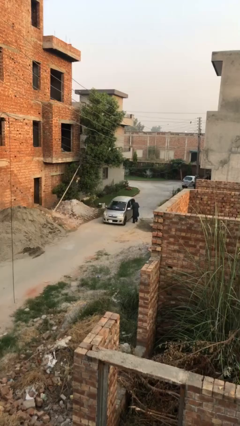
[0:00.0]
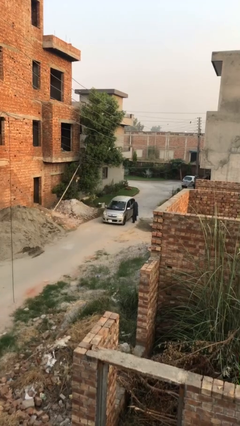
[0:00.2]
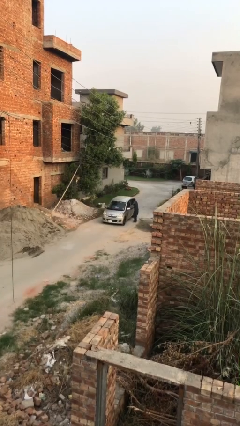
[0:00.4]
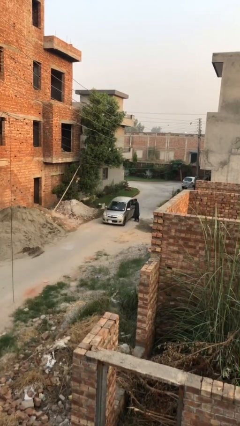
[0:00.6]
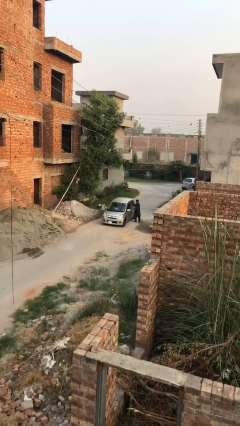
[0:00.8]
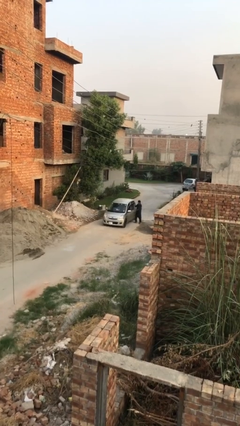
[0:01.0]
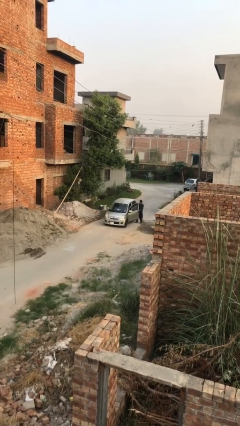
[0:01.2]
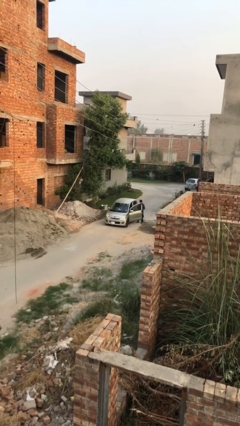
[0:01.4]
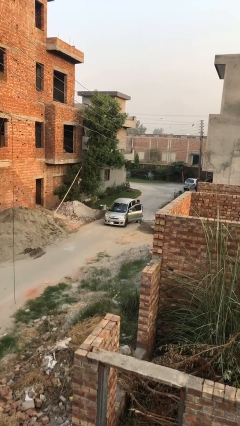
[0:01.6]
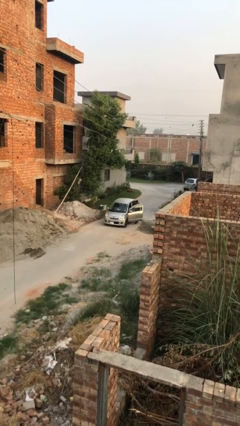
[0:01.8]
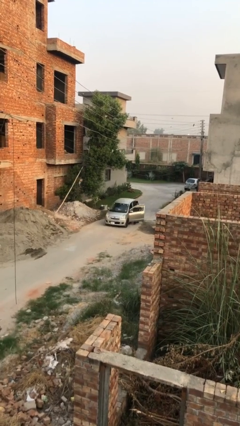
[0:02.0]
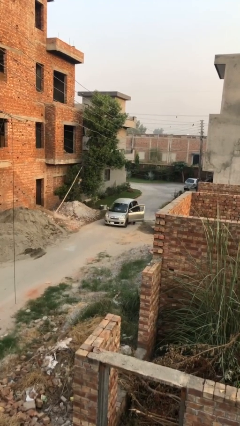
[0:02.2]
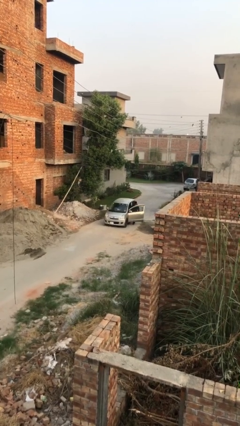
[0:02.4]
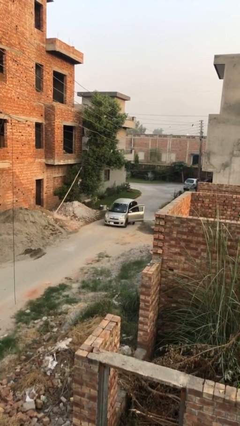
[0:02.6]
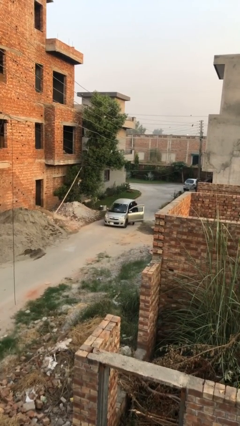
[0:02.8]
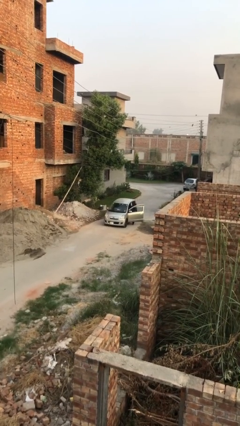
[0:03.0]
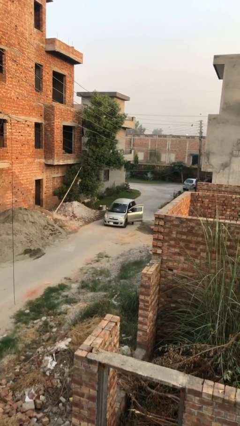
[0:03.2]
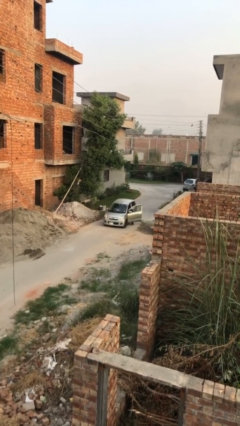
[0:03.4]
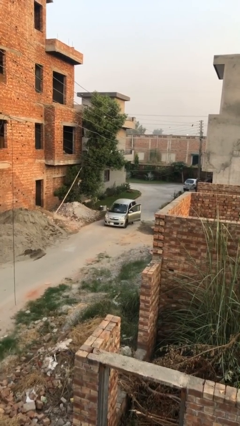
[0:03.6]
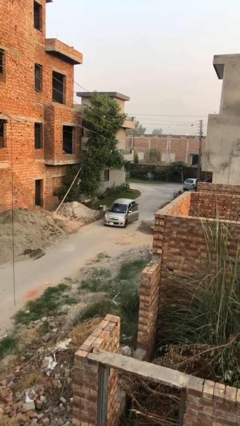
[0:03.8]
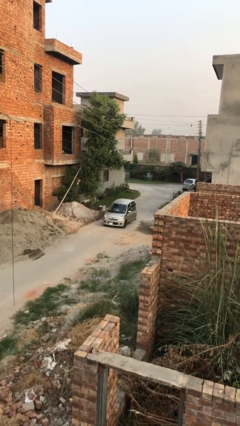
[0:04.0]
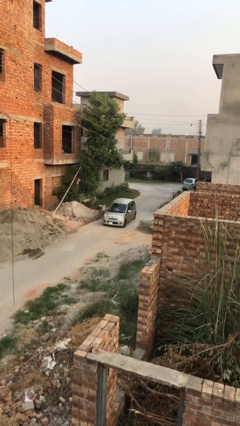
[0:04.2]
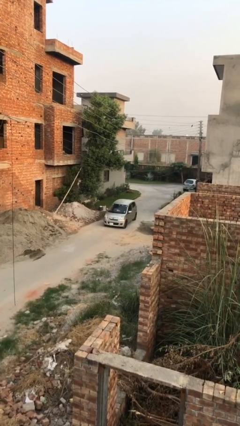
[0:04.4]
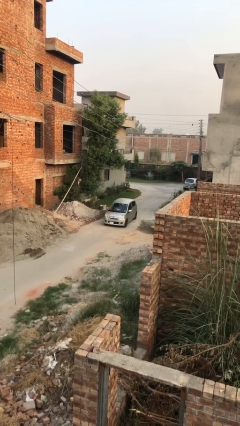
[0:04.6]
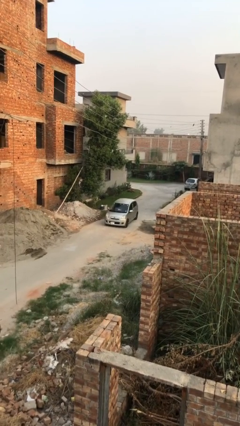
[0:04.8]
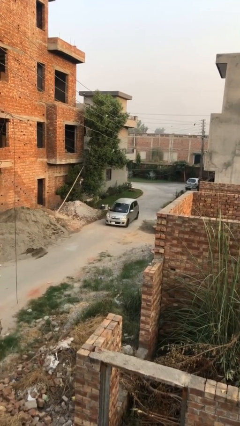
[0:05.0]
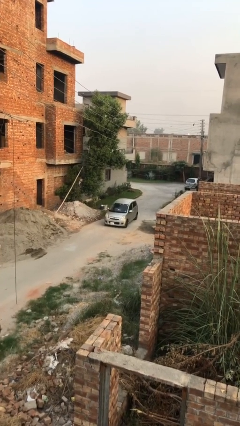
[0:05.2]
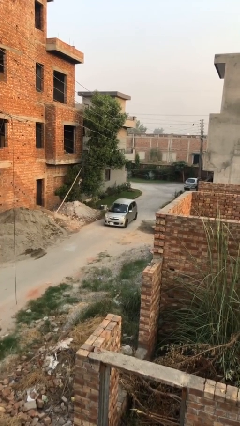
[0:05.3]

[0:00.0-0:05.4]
car picks up person

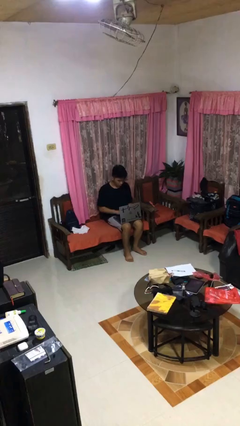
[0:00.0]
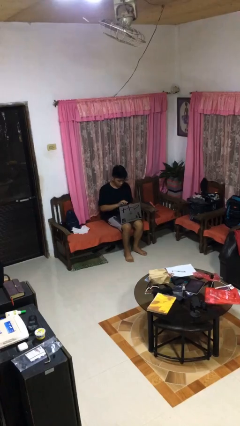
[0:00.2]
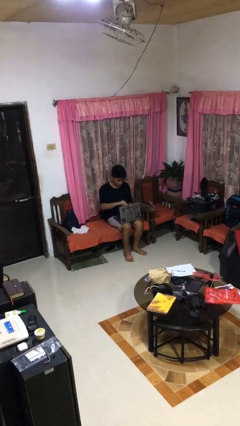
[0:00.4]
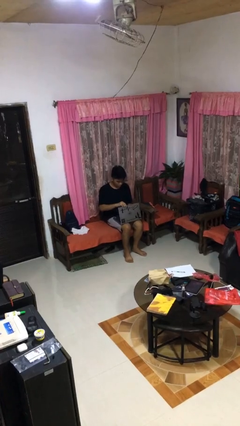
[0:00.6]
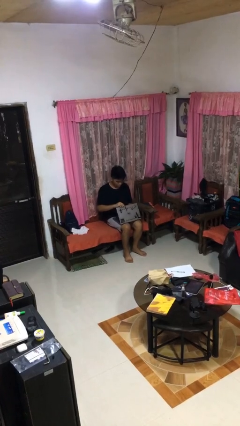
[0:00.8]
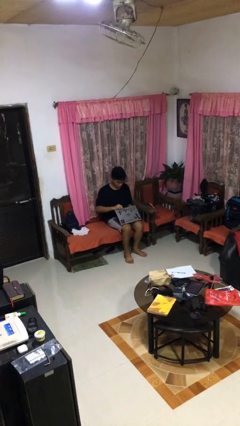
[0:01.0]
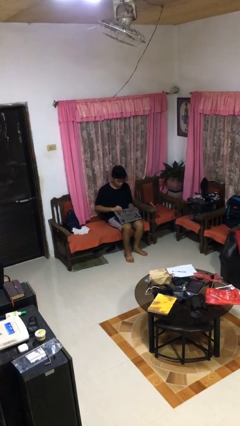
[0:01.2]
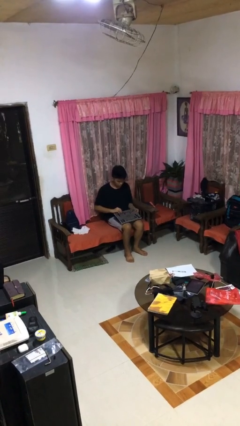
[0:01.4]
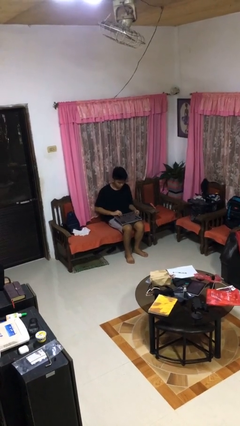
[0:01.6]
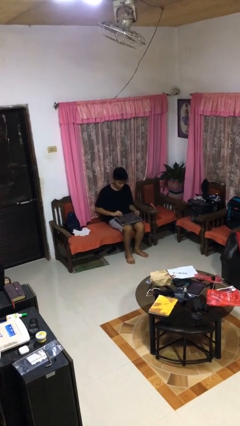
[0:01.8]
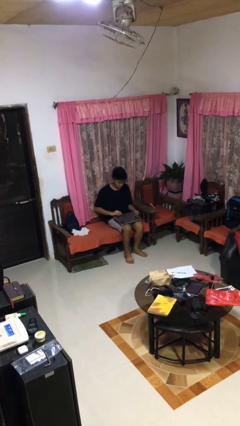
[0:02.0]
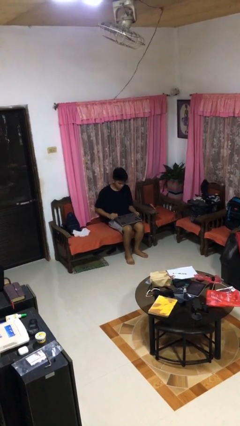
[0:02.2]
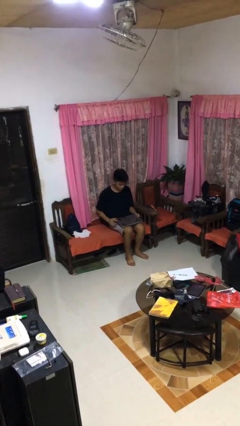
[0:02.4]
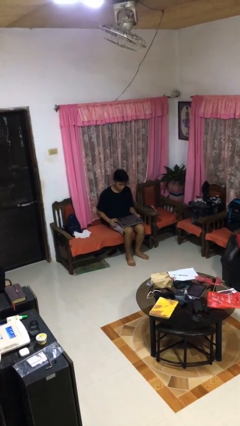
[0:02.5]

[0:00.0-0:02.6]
person closes laptop

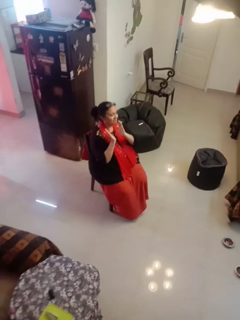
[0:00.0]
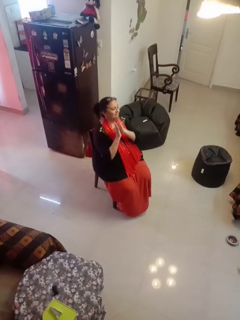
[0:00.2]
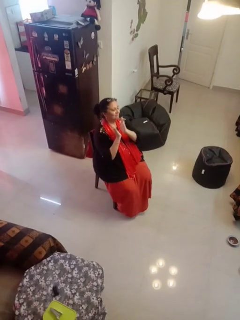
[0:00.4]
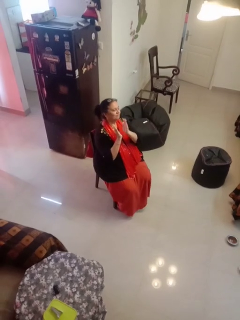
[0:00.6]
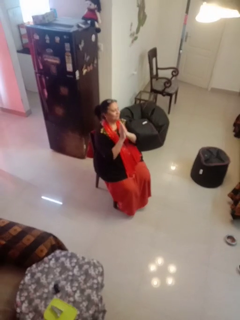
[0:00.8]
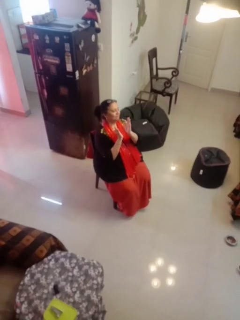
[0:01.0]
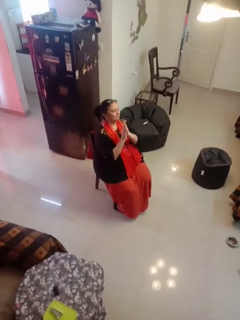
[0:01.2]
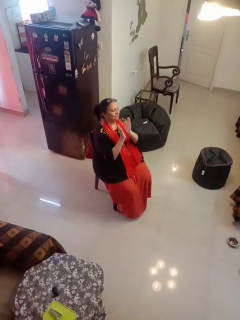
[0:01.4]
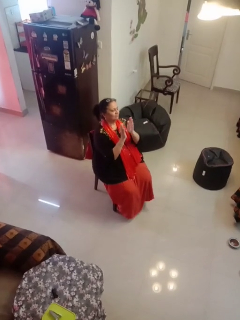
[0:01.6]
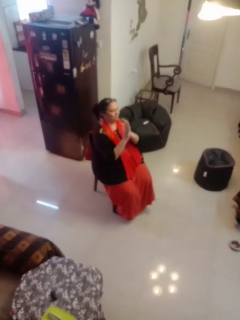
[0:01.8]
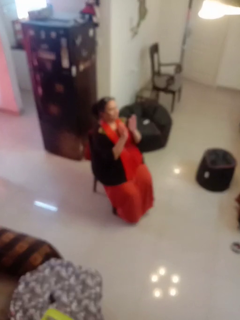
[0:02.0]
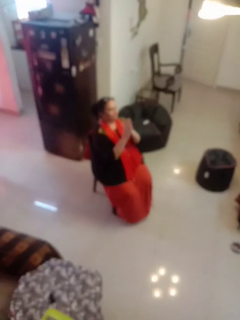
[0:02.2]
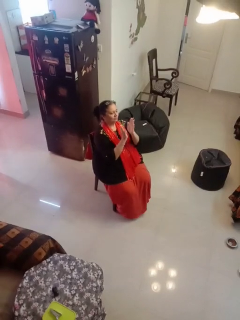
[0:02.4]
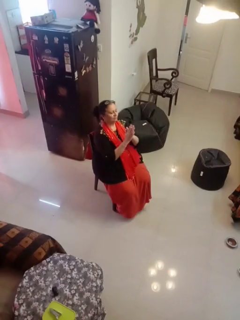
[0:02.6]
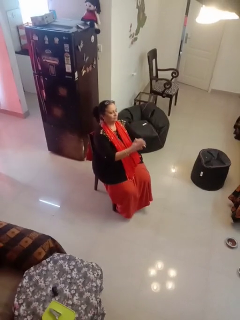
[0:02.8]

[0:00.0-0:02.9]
person claps hands

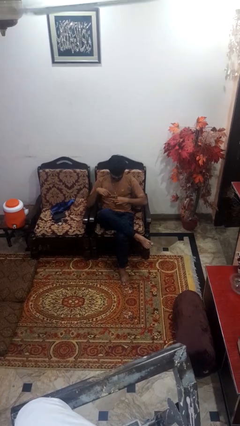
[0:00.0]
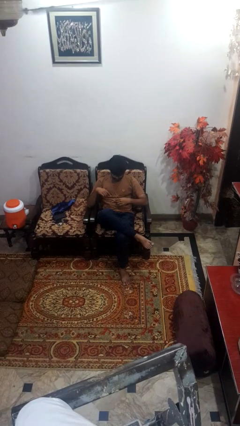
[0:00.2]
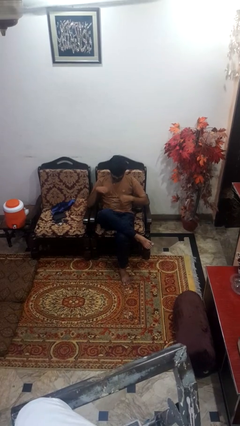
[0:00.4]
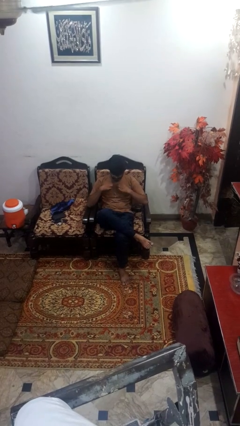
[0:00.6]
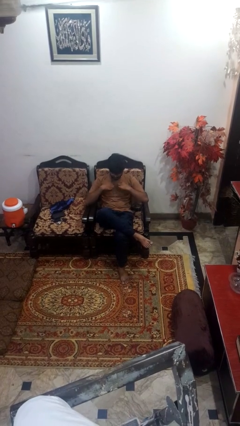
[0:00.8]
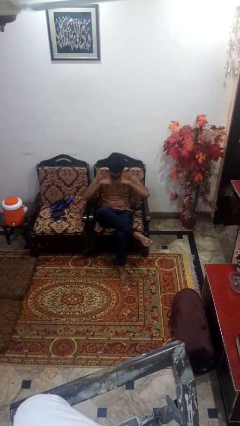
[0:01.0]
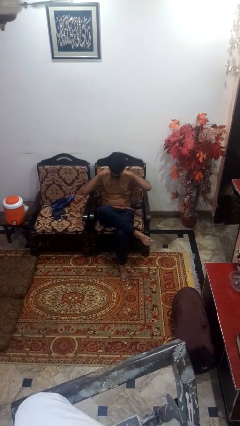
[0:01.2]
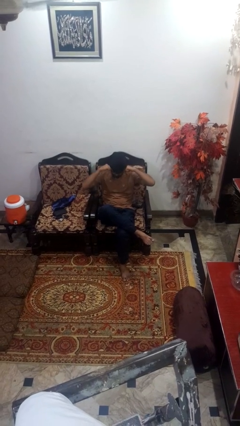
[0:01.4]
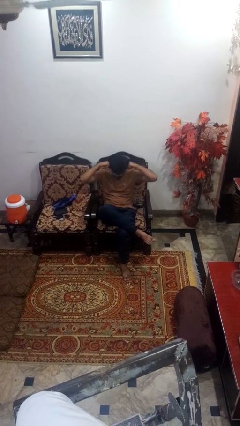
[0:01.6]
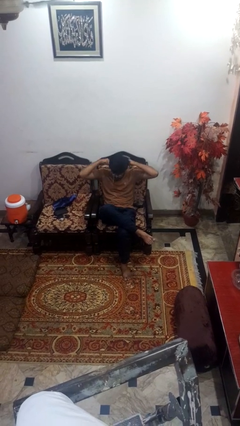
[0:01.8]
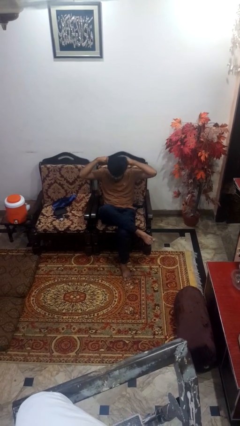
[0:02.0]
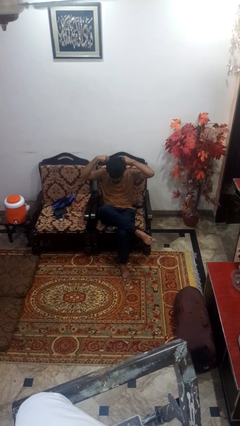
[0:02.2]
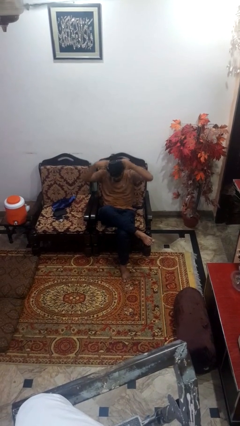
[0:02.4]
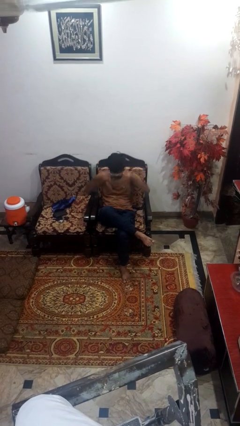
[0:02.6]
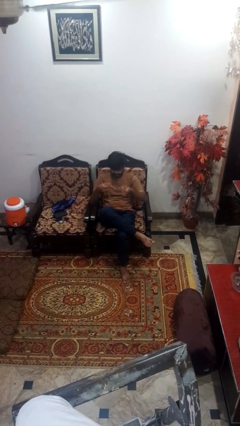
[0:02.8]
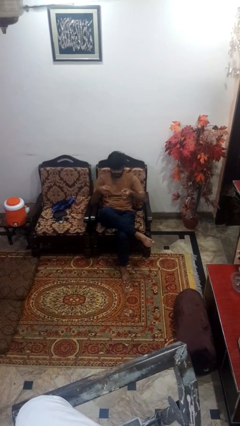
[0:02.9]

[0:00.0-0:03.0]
person takes off necklace

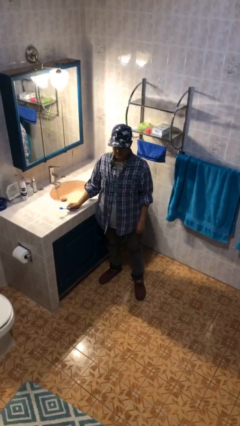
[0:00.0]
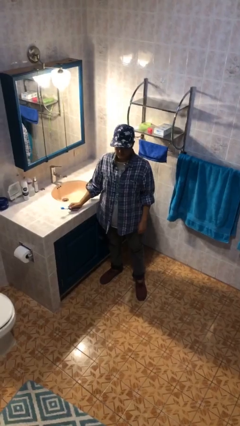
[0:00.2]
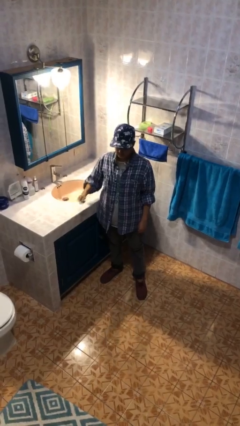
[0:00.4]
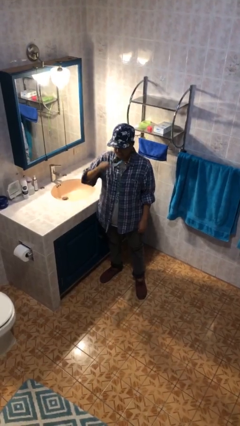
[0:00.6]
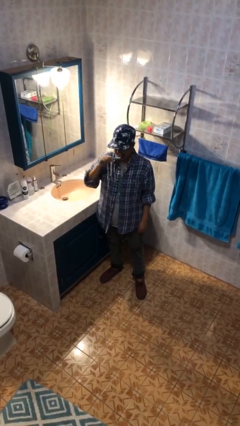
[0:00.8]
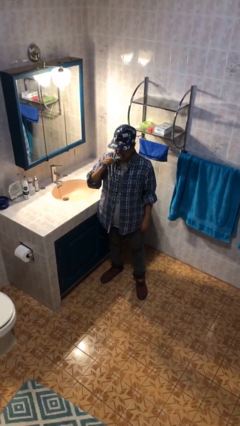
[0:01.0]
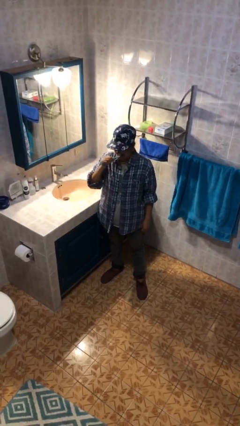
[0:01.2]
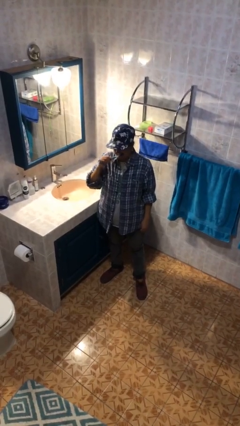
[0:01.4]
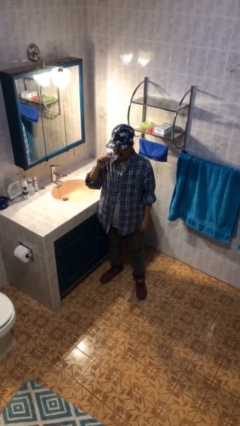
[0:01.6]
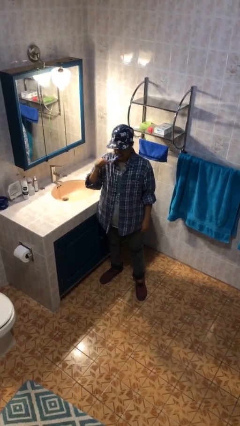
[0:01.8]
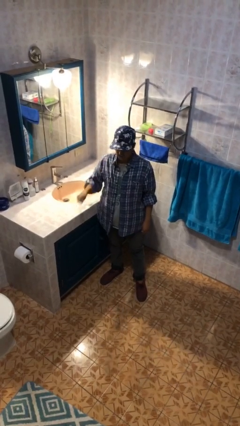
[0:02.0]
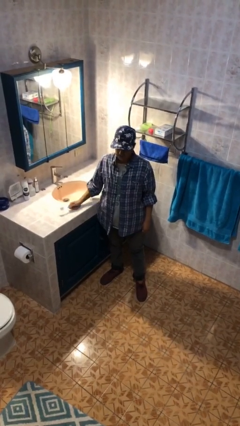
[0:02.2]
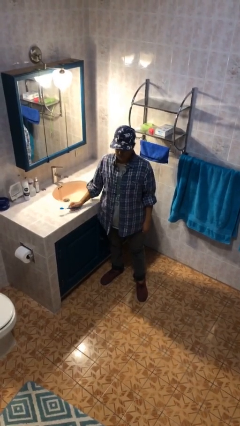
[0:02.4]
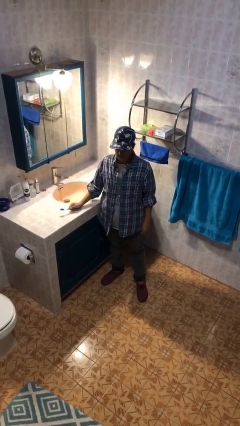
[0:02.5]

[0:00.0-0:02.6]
person brushes teeth

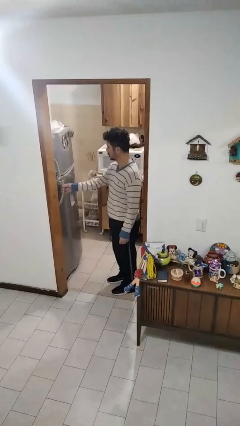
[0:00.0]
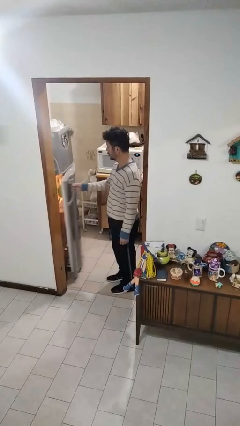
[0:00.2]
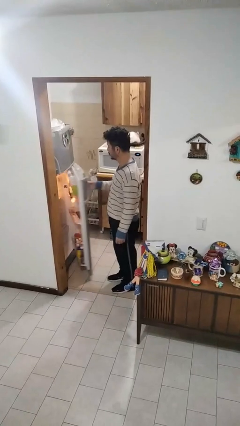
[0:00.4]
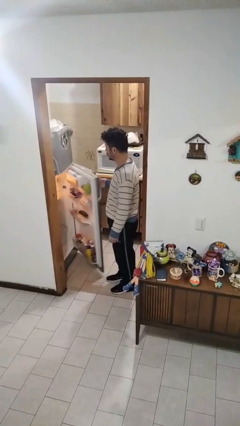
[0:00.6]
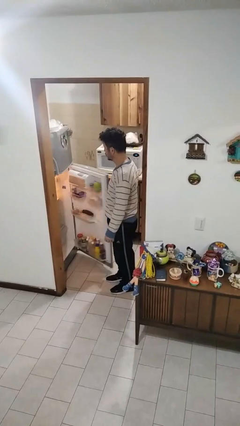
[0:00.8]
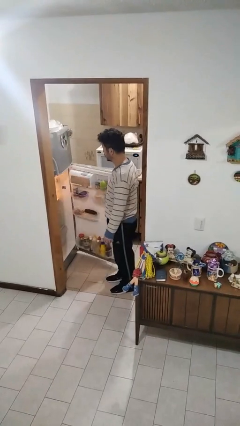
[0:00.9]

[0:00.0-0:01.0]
person opens refrigerator

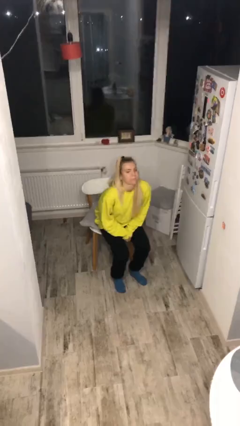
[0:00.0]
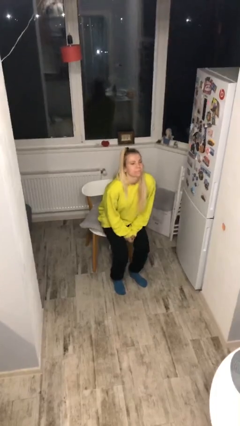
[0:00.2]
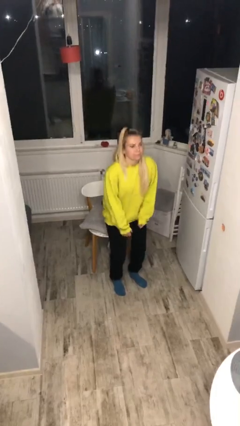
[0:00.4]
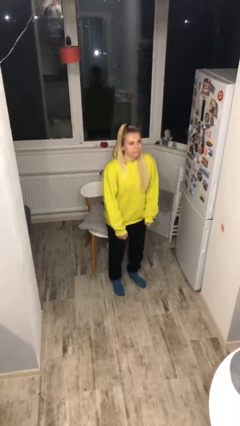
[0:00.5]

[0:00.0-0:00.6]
person stands up
